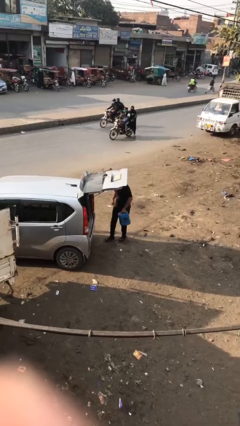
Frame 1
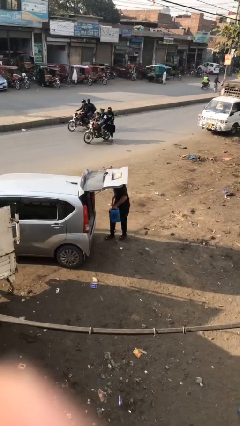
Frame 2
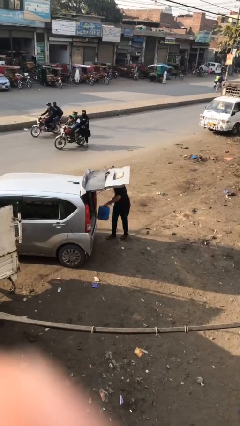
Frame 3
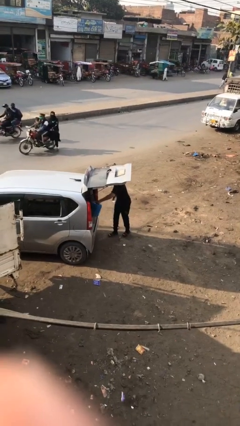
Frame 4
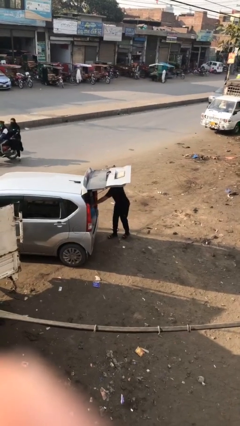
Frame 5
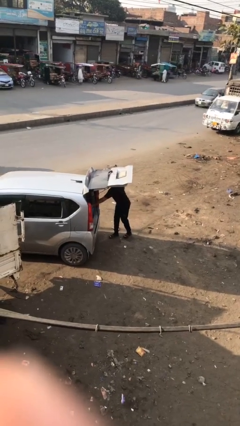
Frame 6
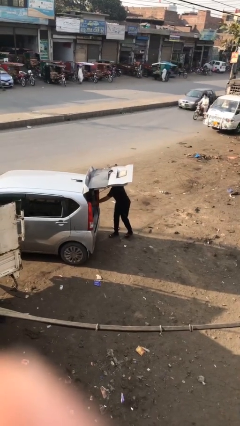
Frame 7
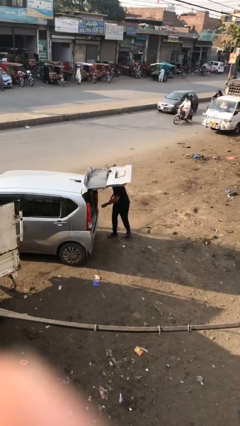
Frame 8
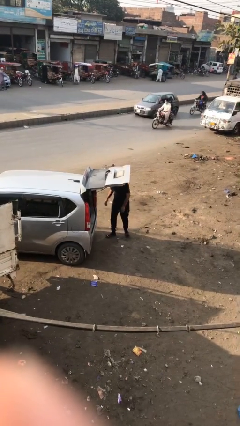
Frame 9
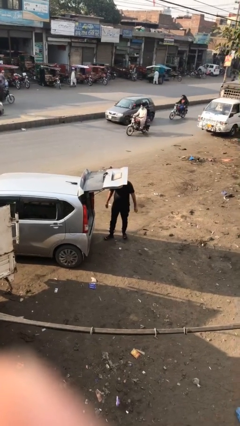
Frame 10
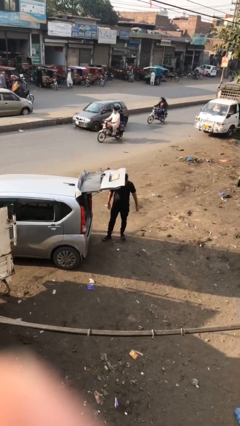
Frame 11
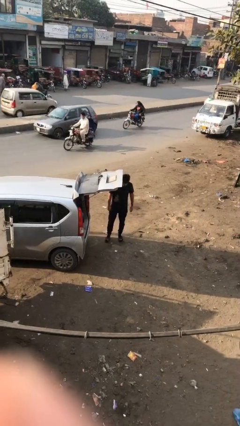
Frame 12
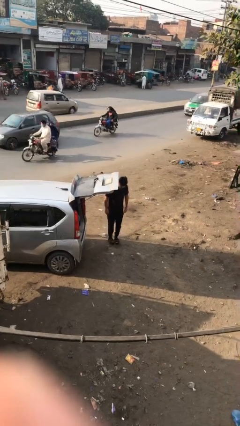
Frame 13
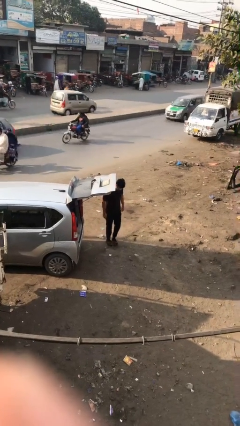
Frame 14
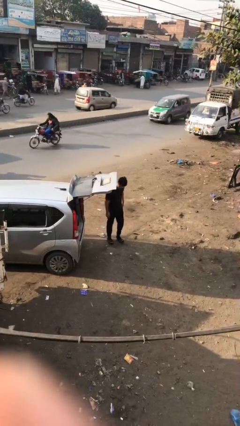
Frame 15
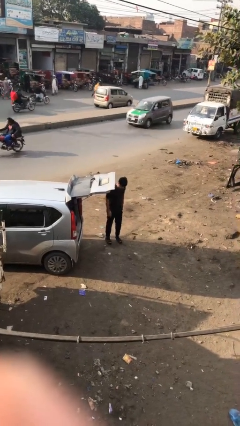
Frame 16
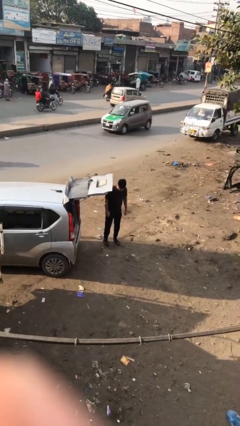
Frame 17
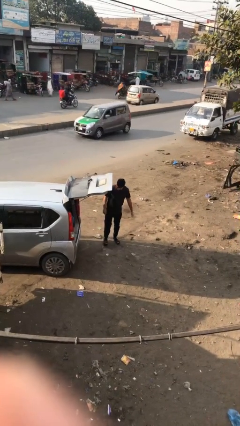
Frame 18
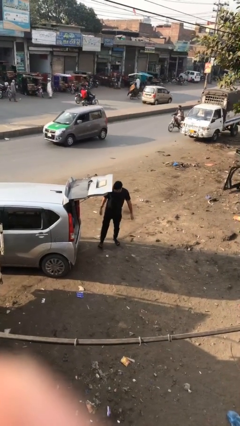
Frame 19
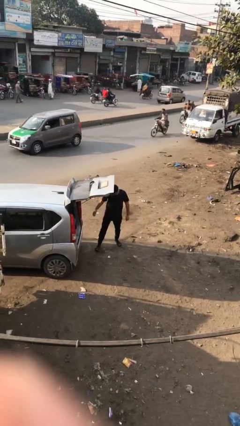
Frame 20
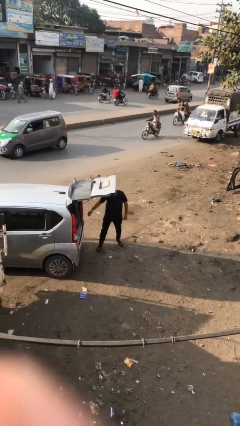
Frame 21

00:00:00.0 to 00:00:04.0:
person loads car

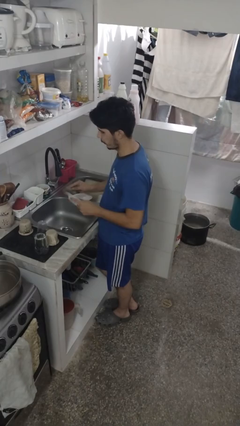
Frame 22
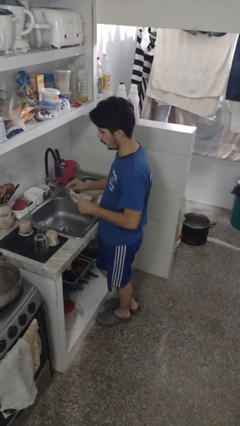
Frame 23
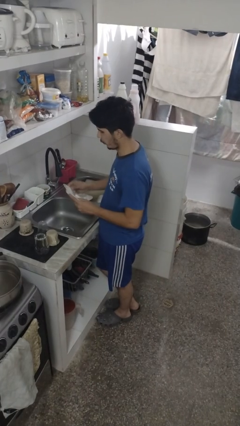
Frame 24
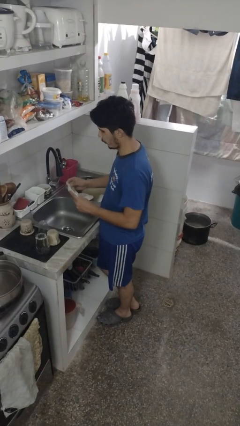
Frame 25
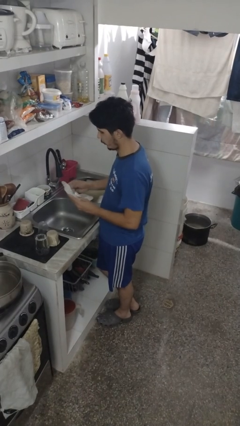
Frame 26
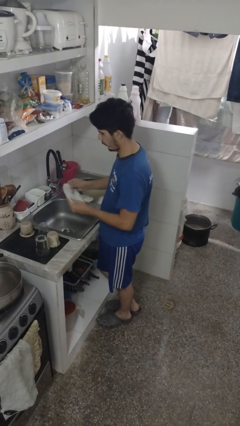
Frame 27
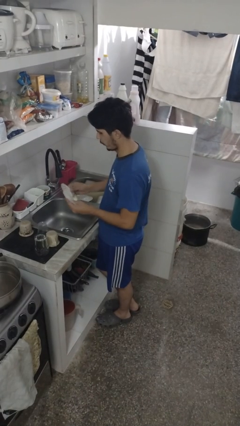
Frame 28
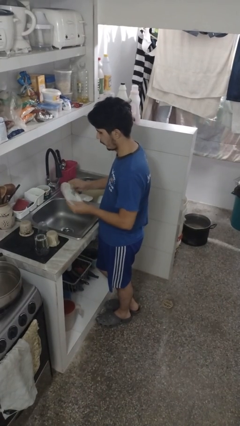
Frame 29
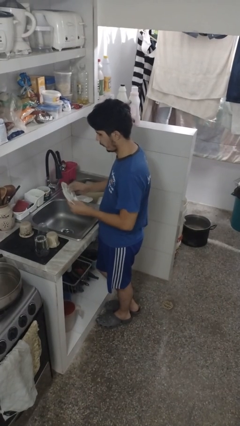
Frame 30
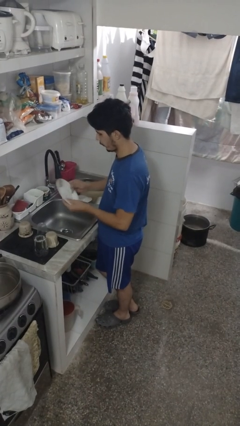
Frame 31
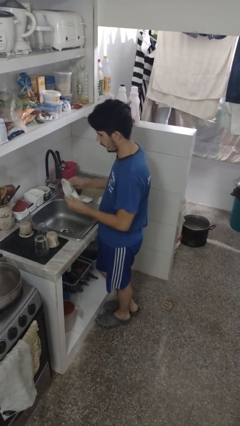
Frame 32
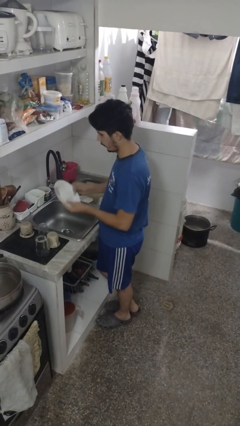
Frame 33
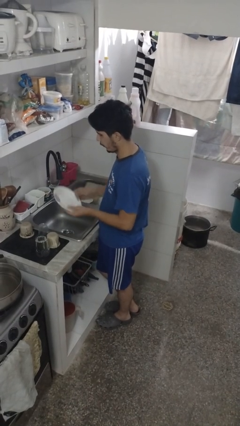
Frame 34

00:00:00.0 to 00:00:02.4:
person washes dish

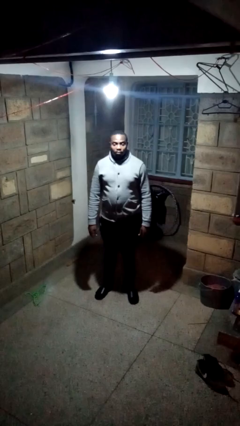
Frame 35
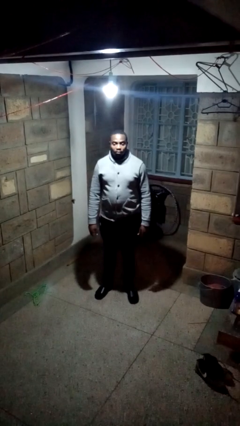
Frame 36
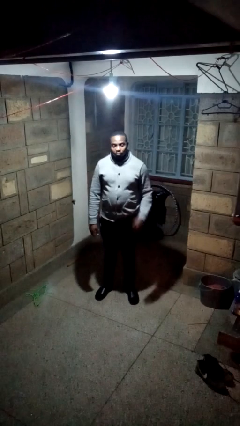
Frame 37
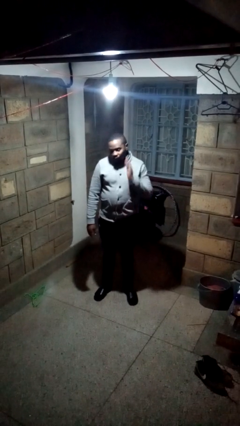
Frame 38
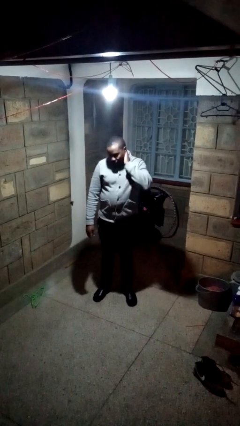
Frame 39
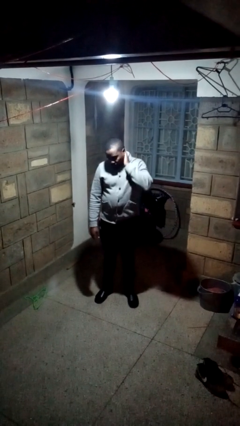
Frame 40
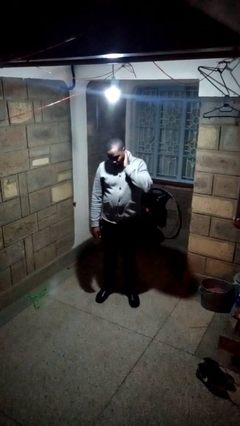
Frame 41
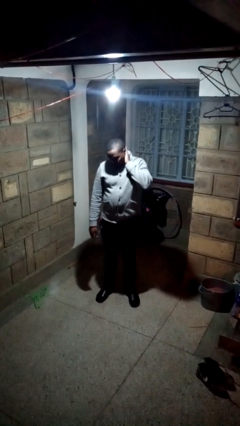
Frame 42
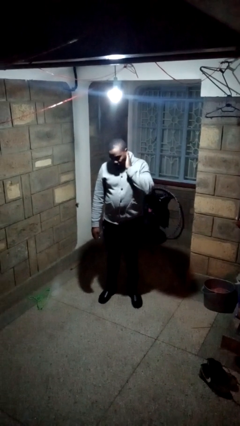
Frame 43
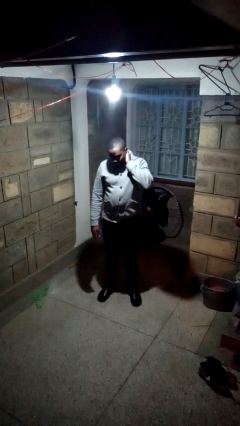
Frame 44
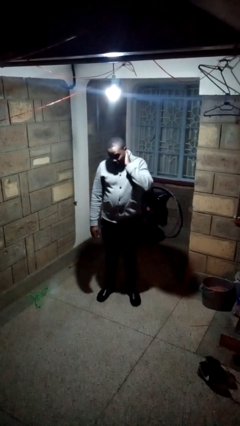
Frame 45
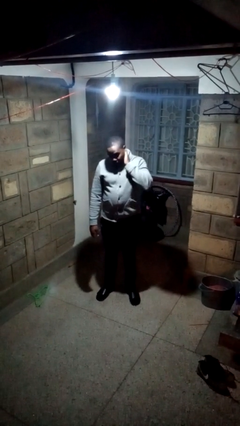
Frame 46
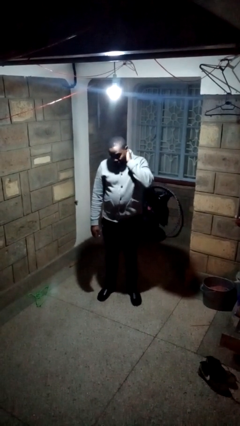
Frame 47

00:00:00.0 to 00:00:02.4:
person rubs neck

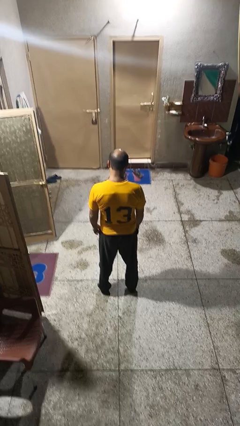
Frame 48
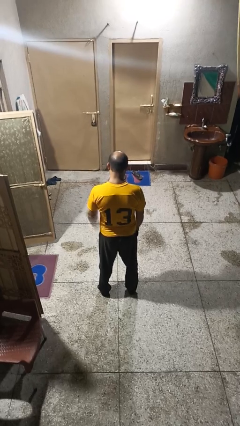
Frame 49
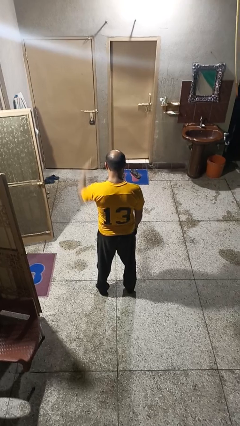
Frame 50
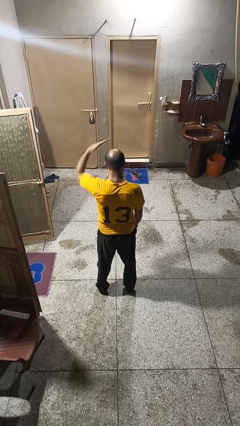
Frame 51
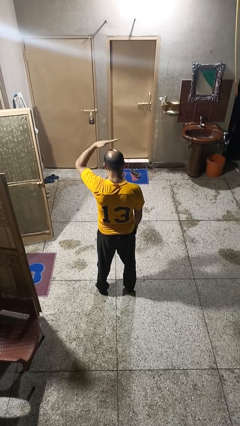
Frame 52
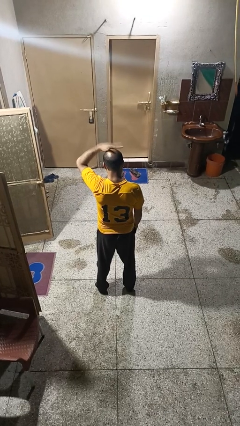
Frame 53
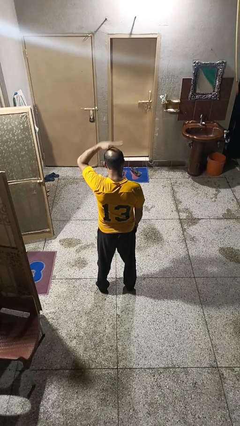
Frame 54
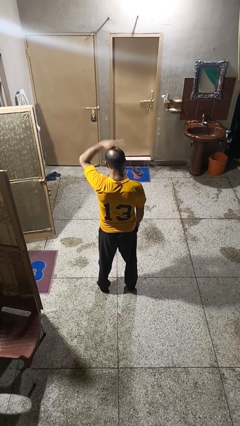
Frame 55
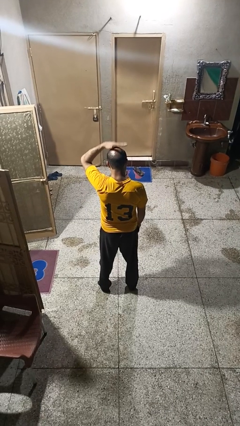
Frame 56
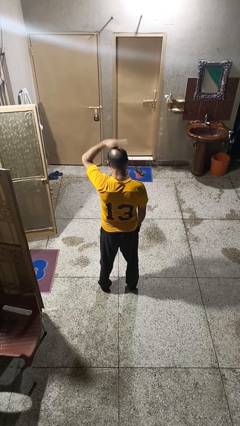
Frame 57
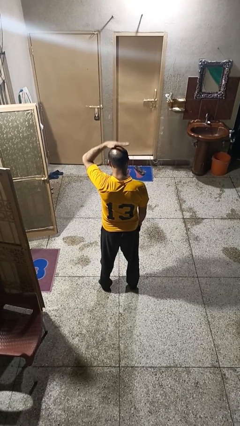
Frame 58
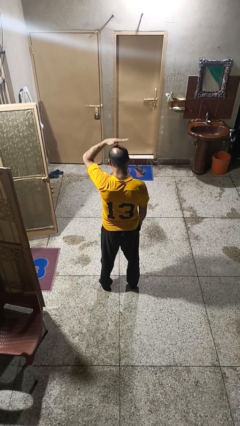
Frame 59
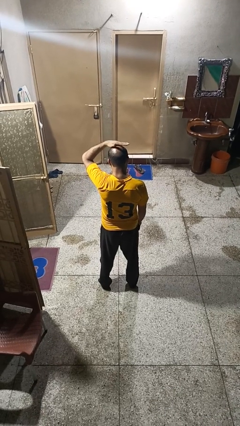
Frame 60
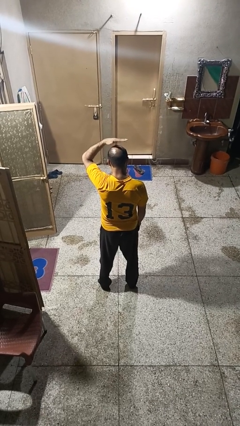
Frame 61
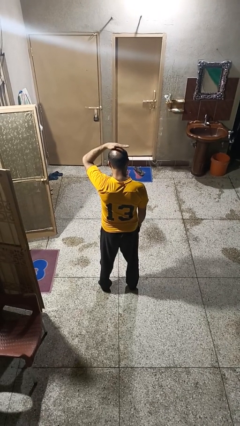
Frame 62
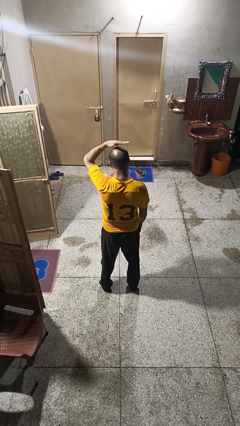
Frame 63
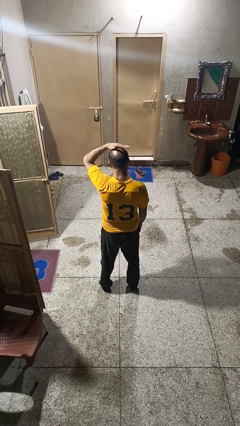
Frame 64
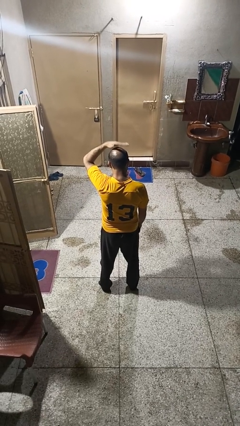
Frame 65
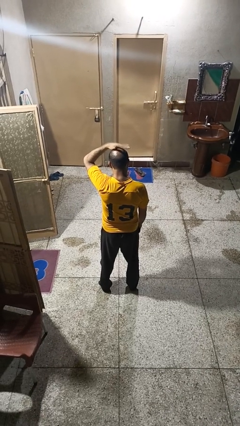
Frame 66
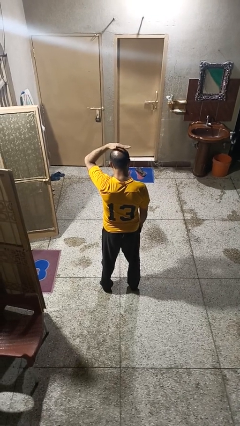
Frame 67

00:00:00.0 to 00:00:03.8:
person pats head

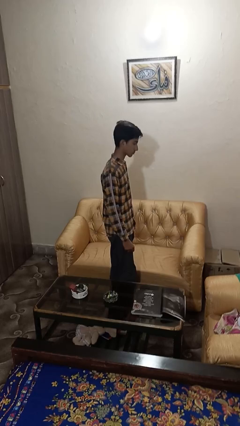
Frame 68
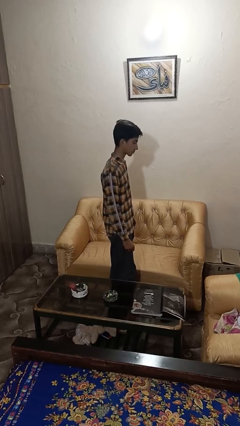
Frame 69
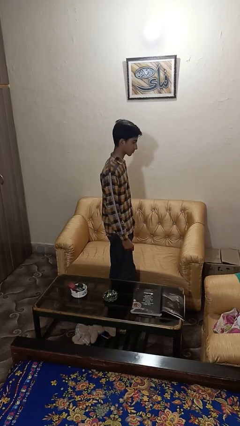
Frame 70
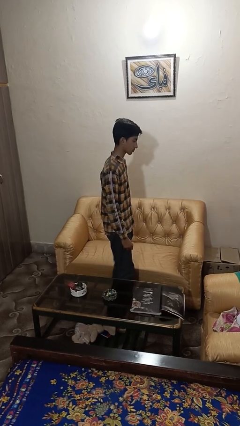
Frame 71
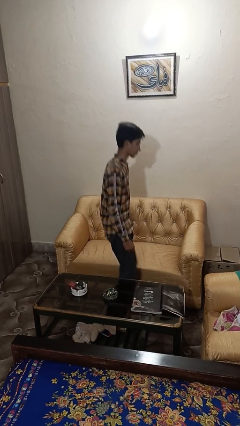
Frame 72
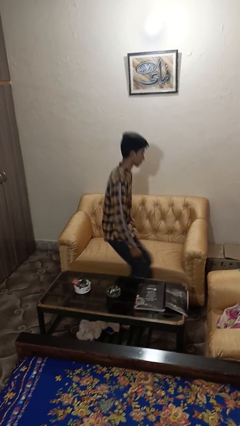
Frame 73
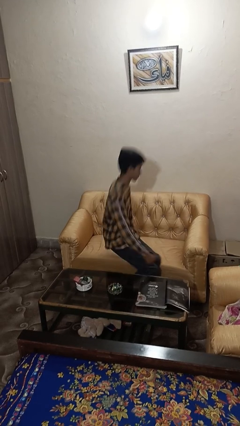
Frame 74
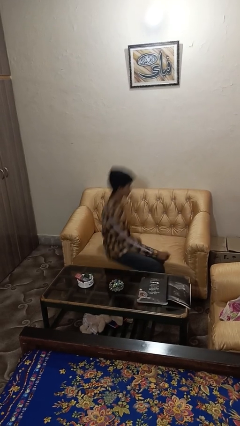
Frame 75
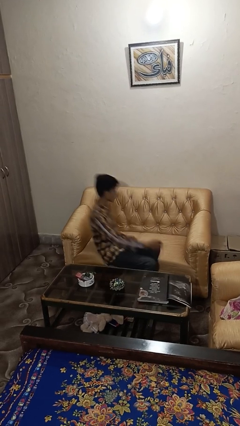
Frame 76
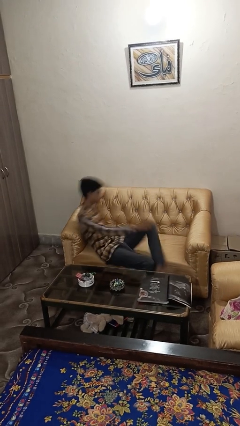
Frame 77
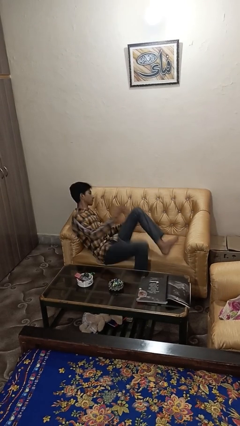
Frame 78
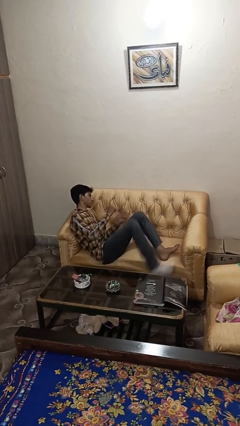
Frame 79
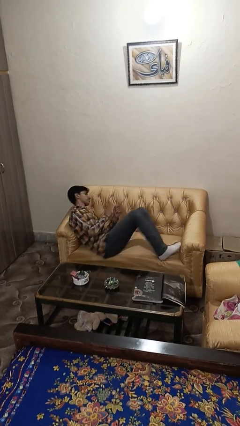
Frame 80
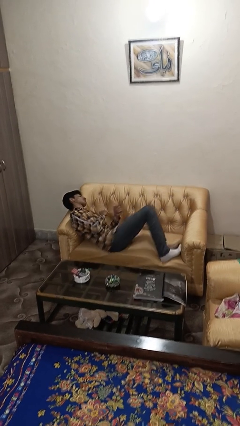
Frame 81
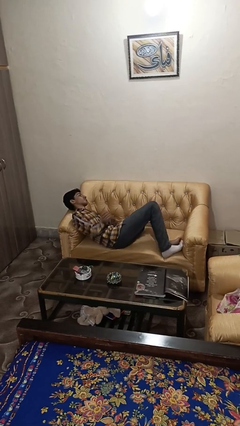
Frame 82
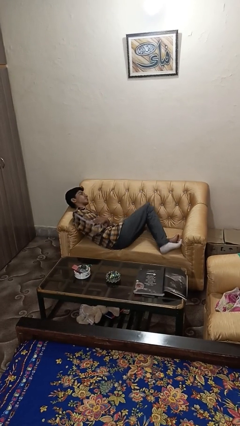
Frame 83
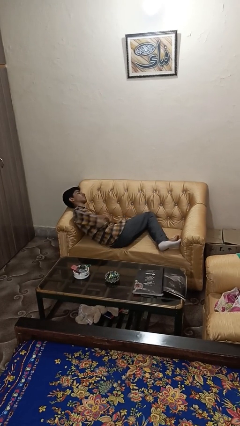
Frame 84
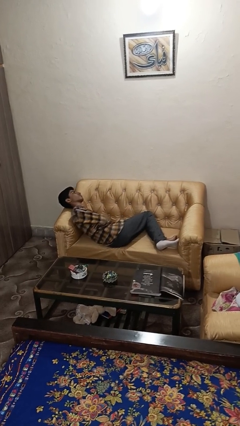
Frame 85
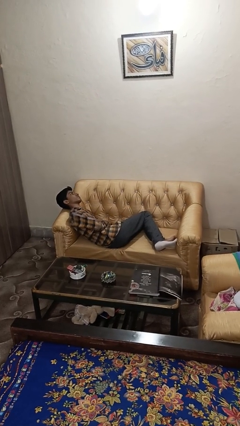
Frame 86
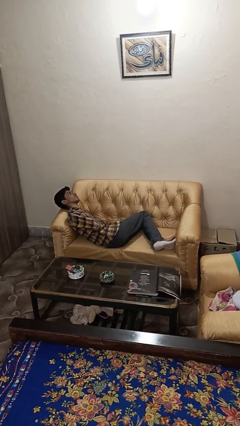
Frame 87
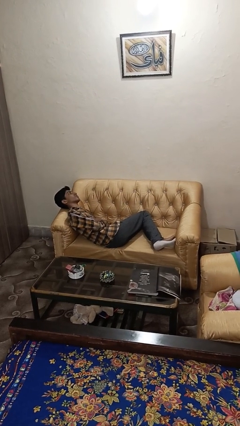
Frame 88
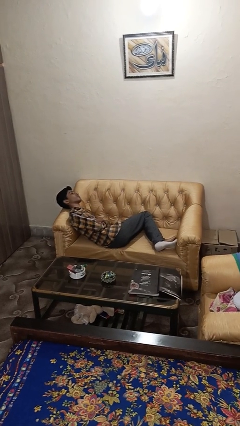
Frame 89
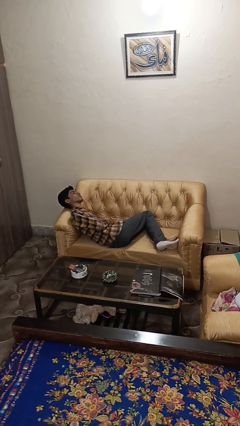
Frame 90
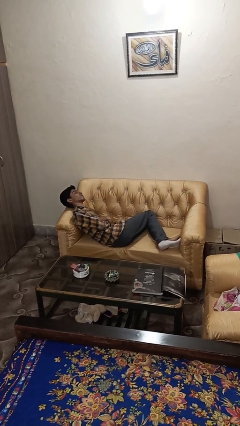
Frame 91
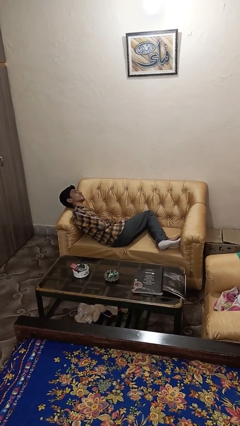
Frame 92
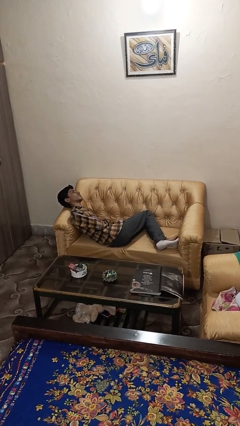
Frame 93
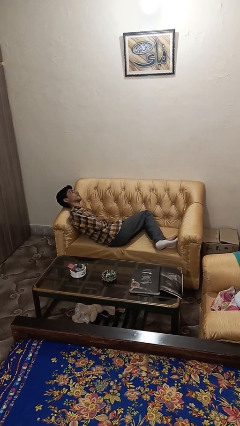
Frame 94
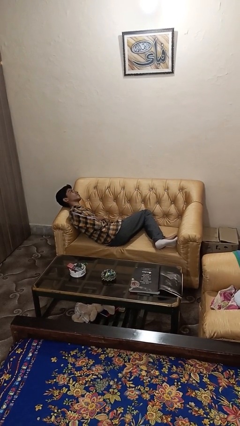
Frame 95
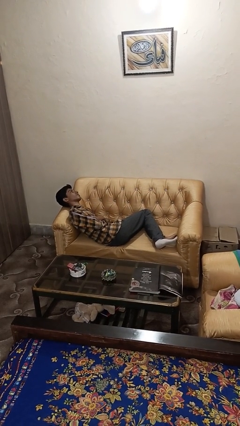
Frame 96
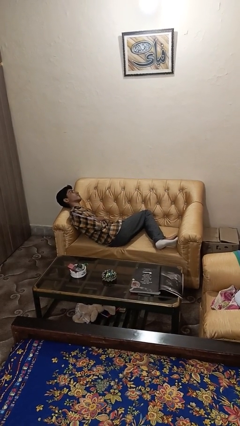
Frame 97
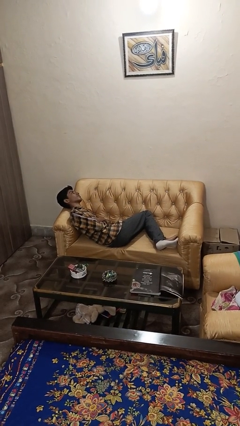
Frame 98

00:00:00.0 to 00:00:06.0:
person lies down on couch
